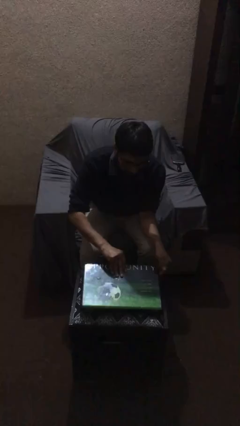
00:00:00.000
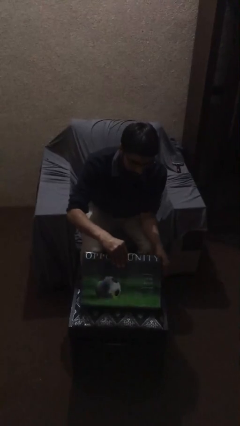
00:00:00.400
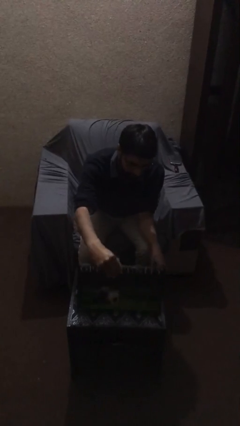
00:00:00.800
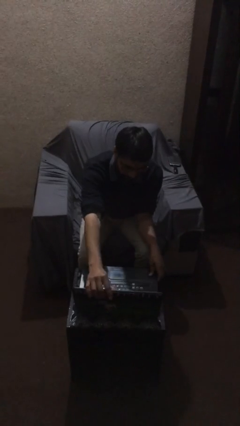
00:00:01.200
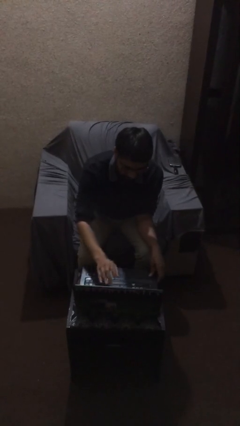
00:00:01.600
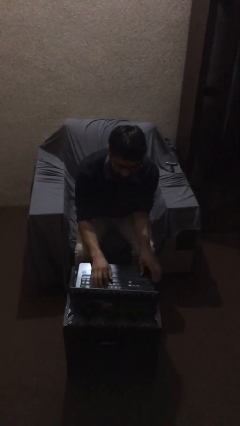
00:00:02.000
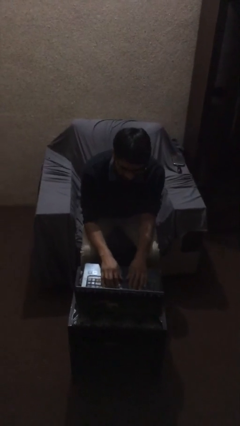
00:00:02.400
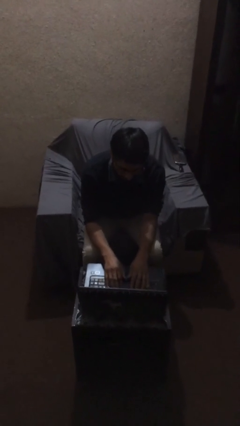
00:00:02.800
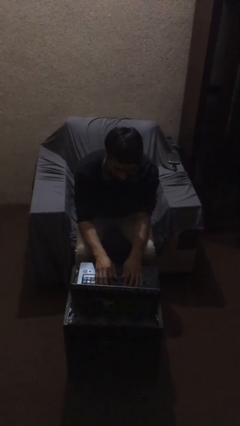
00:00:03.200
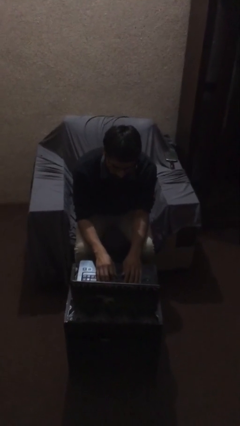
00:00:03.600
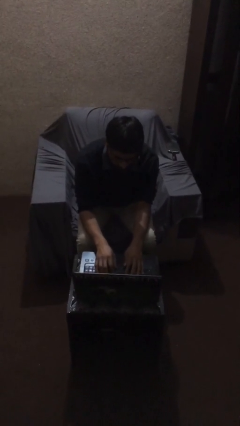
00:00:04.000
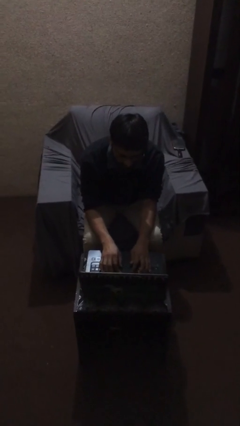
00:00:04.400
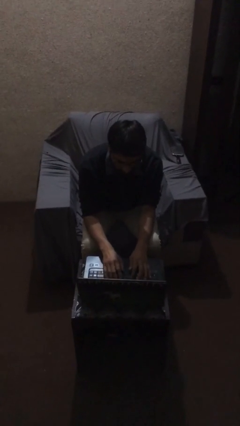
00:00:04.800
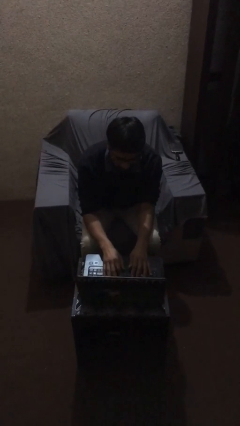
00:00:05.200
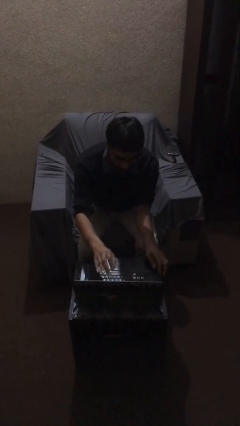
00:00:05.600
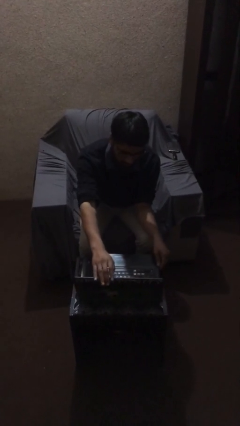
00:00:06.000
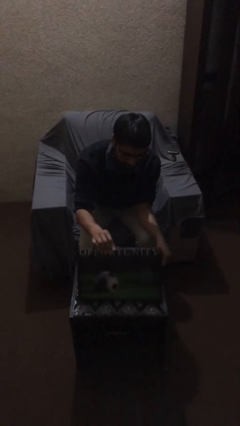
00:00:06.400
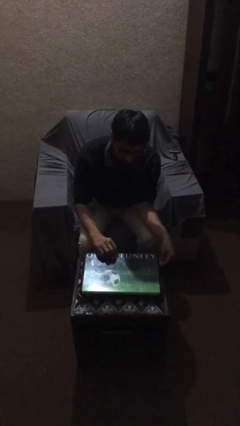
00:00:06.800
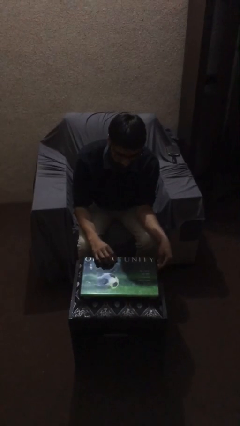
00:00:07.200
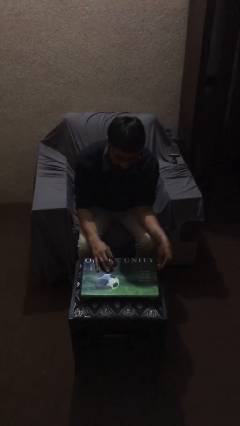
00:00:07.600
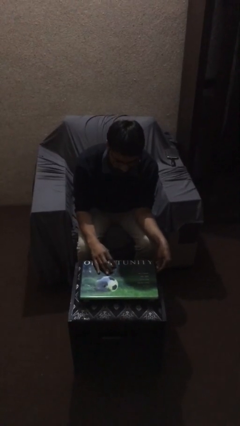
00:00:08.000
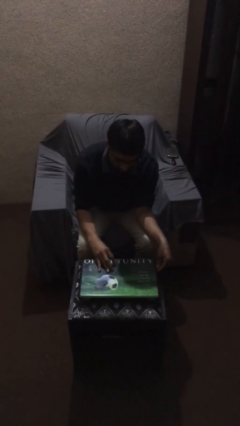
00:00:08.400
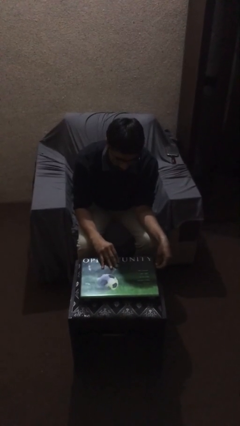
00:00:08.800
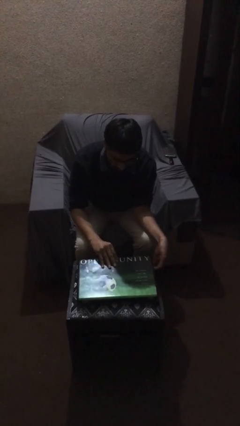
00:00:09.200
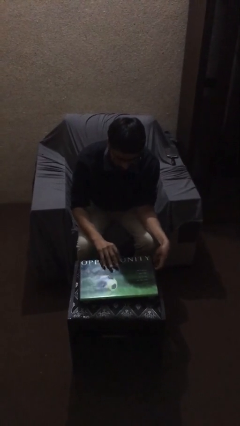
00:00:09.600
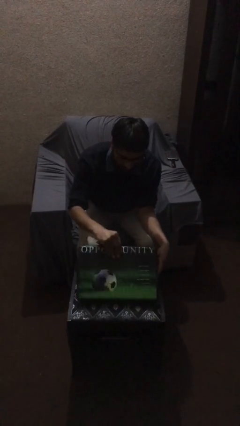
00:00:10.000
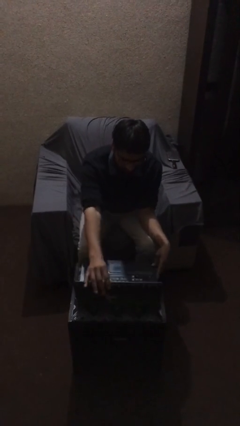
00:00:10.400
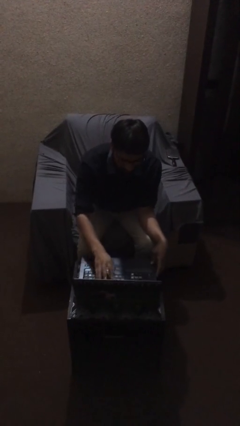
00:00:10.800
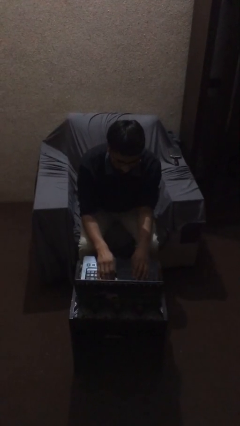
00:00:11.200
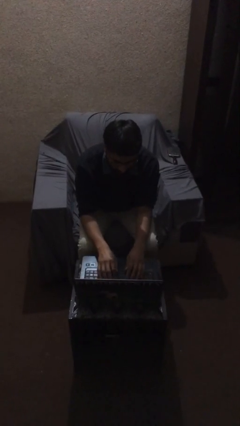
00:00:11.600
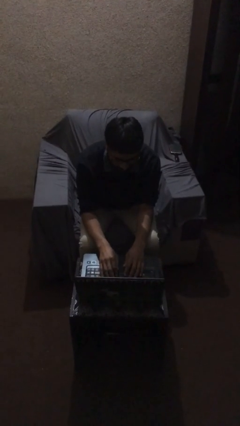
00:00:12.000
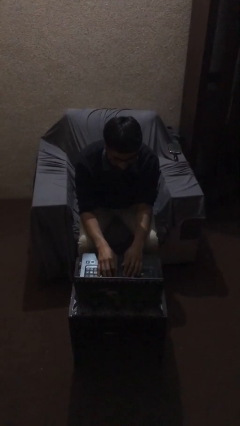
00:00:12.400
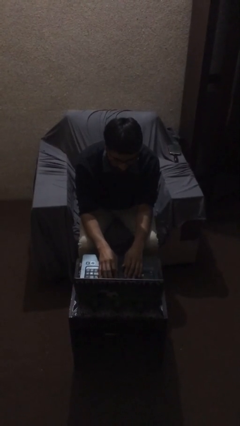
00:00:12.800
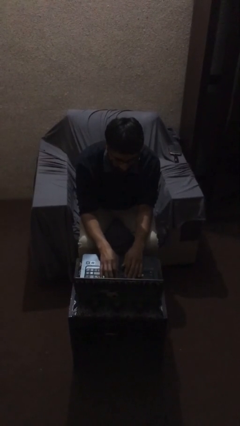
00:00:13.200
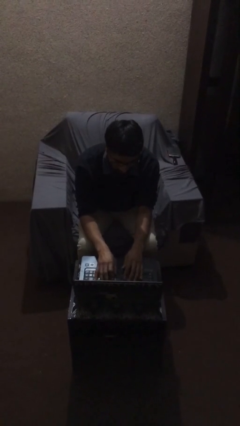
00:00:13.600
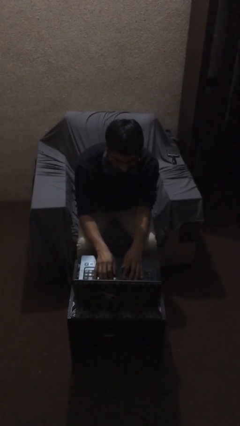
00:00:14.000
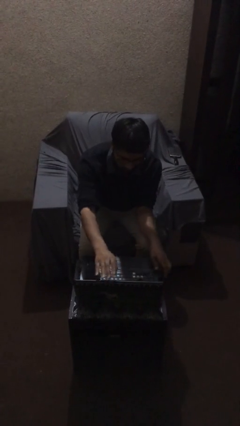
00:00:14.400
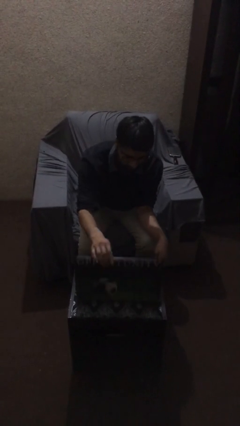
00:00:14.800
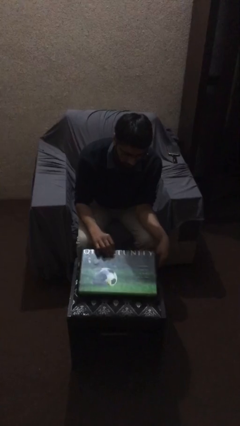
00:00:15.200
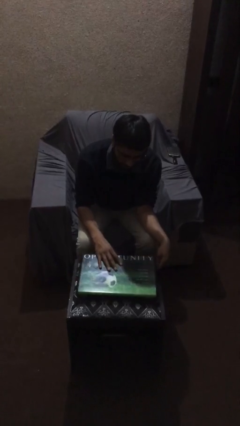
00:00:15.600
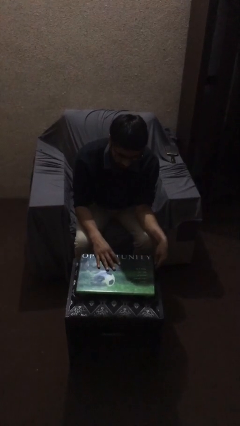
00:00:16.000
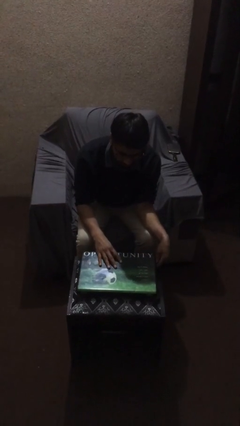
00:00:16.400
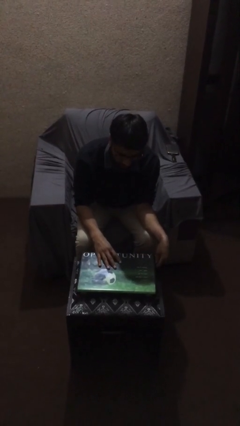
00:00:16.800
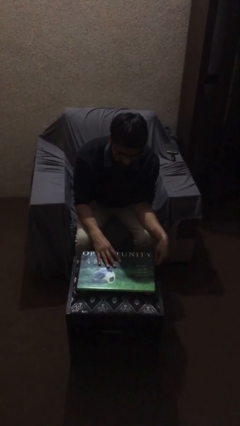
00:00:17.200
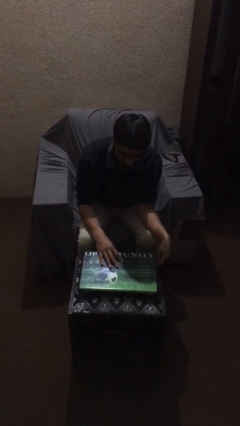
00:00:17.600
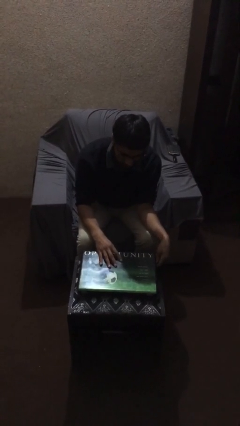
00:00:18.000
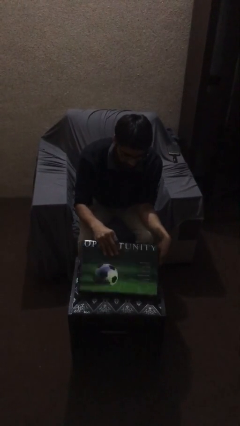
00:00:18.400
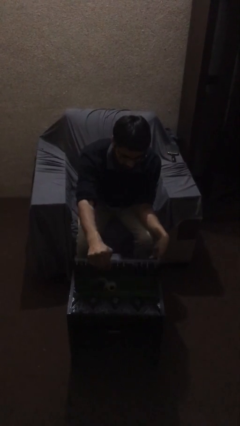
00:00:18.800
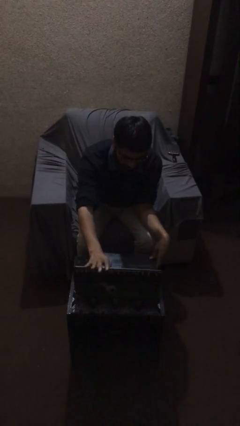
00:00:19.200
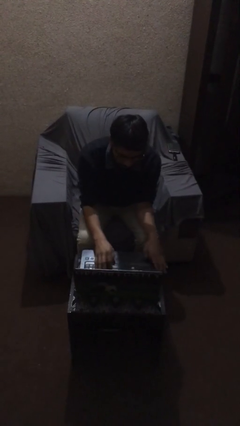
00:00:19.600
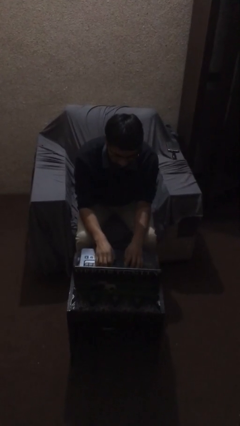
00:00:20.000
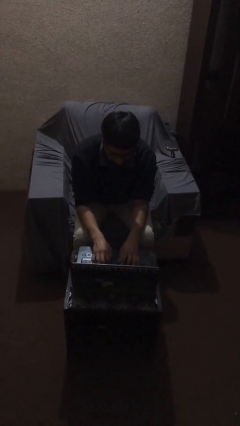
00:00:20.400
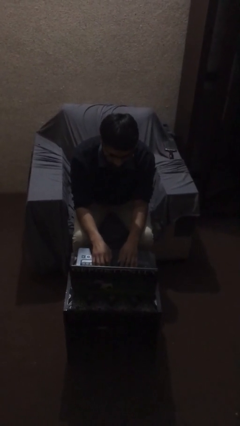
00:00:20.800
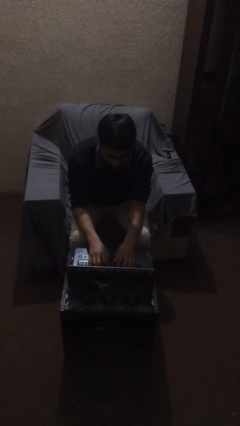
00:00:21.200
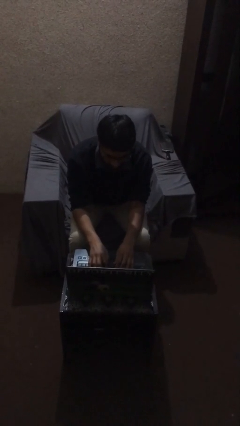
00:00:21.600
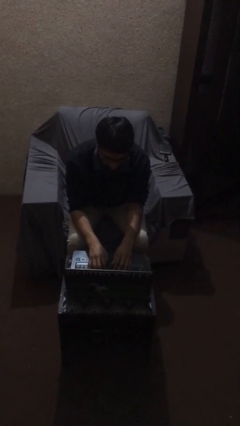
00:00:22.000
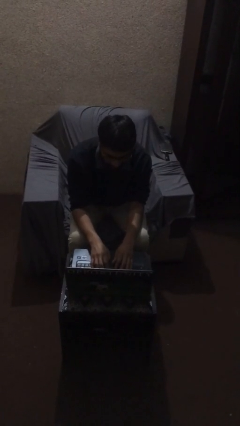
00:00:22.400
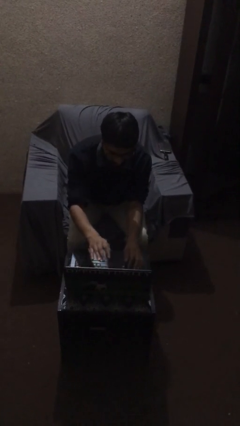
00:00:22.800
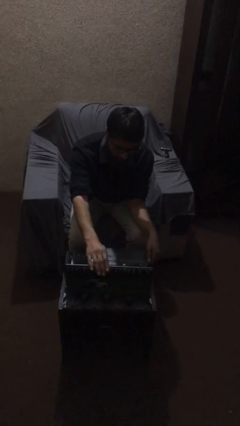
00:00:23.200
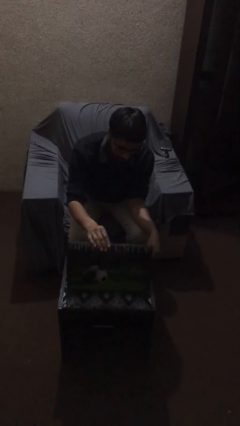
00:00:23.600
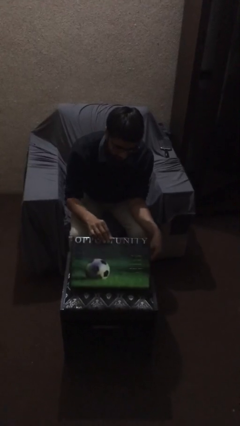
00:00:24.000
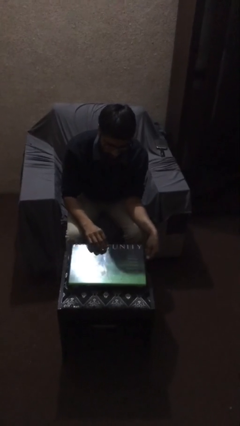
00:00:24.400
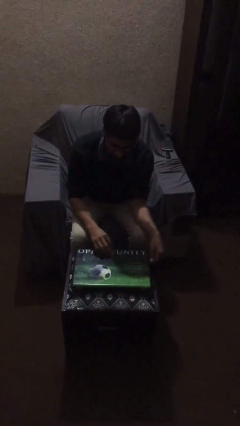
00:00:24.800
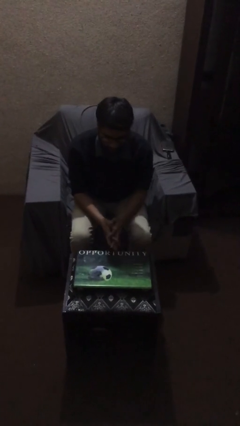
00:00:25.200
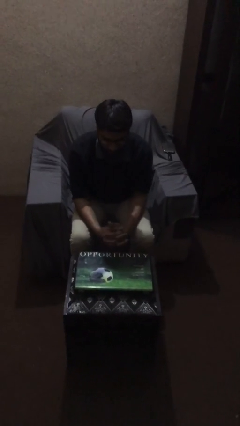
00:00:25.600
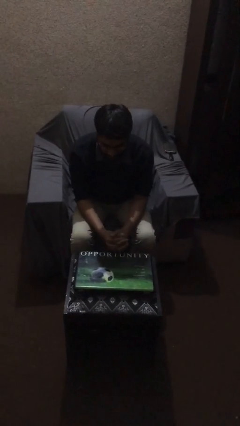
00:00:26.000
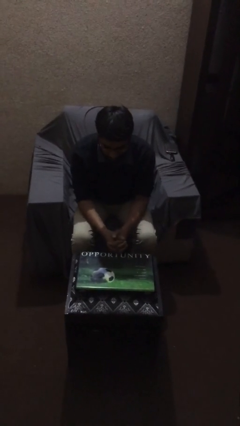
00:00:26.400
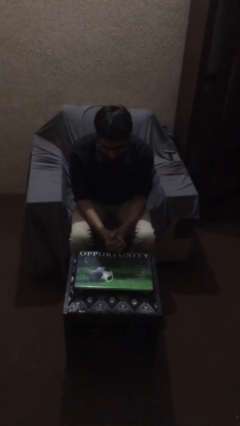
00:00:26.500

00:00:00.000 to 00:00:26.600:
person interacts with laptop

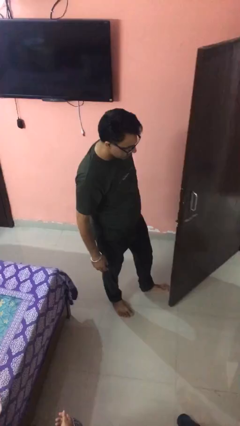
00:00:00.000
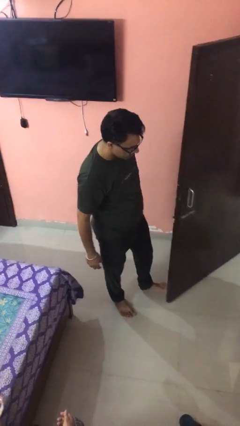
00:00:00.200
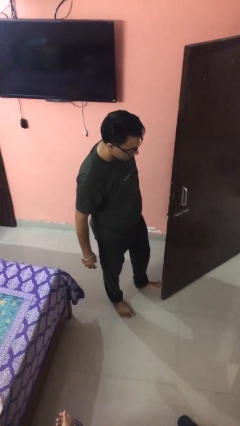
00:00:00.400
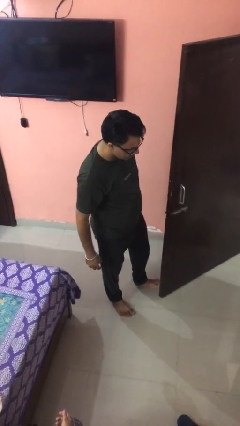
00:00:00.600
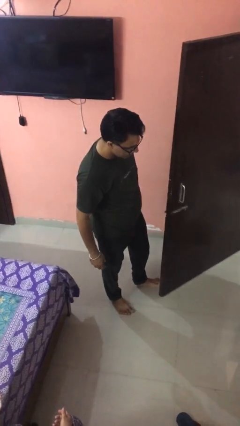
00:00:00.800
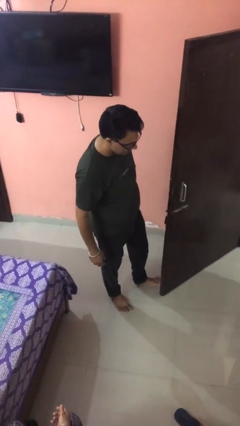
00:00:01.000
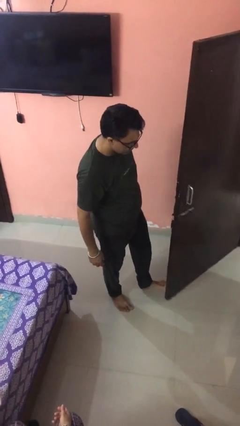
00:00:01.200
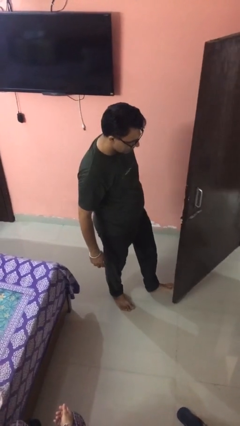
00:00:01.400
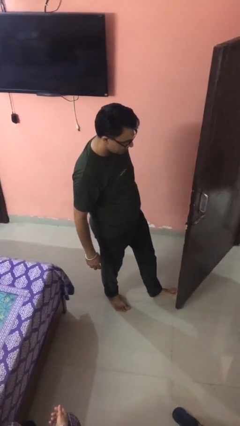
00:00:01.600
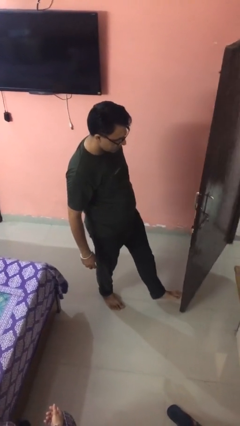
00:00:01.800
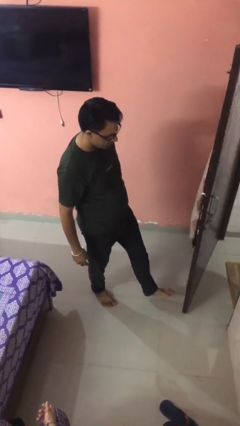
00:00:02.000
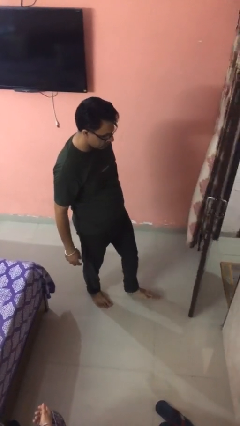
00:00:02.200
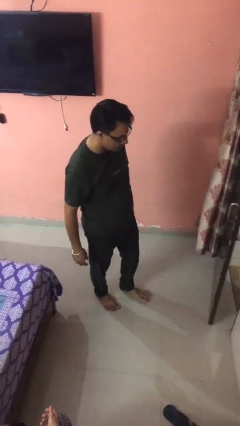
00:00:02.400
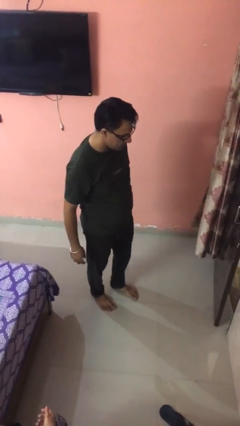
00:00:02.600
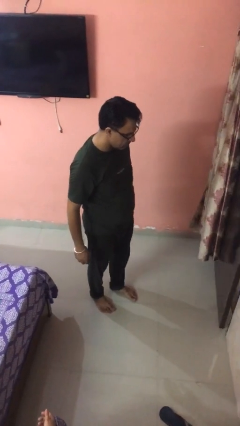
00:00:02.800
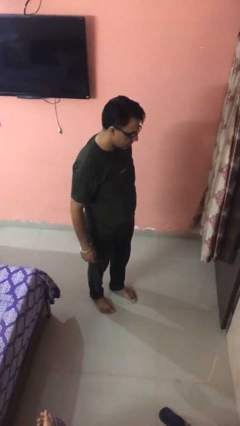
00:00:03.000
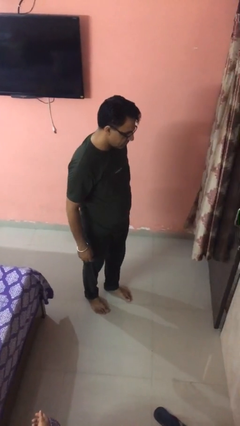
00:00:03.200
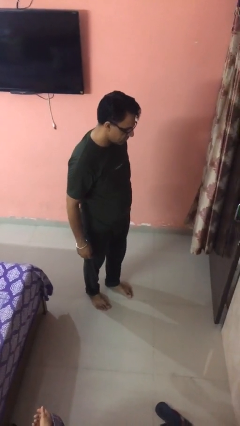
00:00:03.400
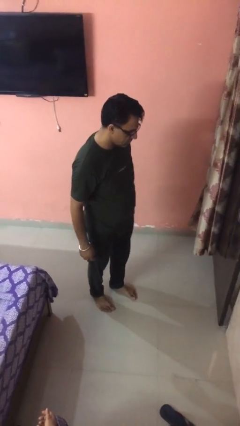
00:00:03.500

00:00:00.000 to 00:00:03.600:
person closes door with foot

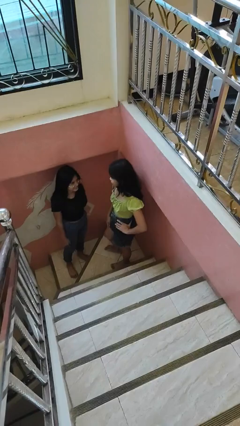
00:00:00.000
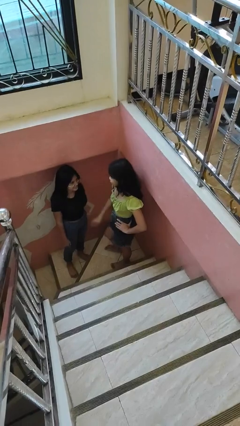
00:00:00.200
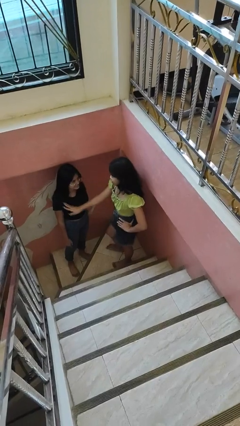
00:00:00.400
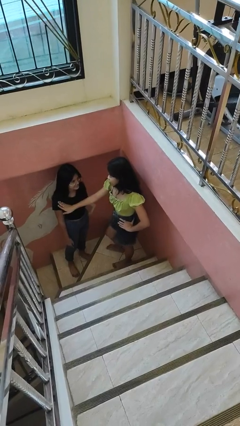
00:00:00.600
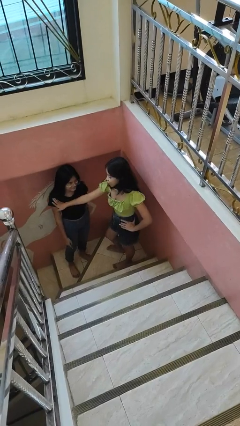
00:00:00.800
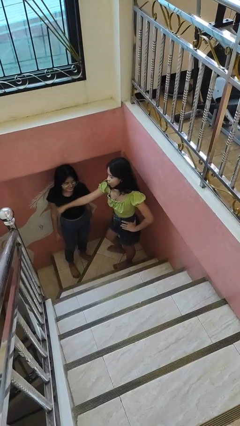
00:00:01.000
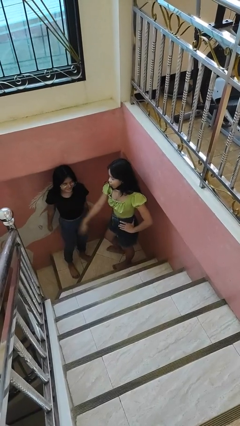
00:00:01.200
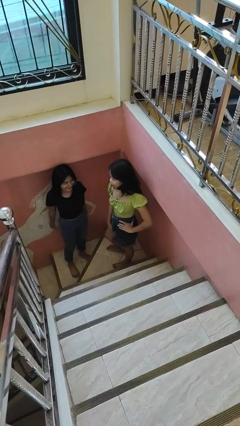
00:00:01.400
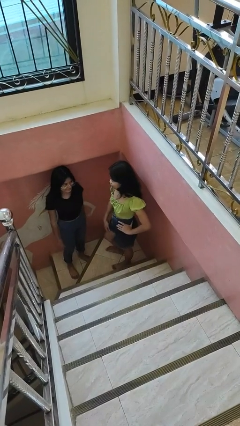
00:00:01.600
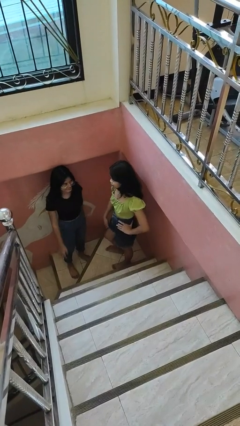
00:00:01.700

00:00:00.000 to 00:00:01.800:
person shoves person
